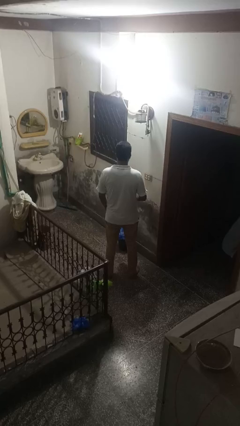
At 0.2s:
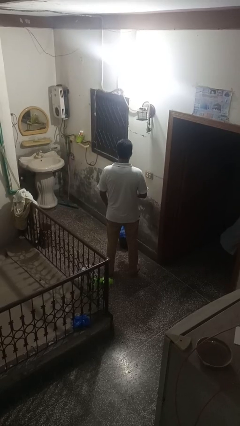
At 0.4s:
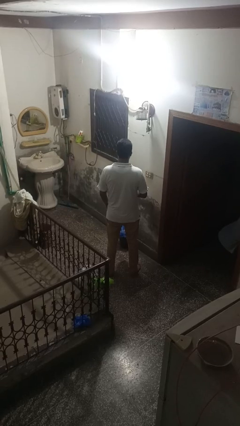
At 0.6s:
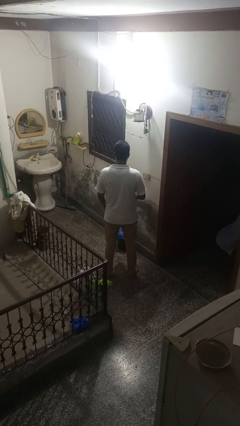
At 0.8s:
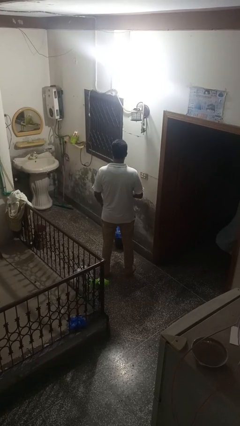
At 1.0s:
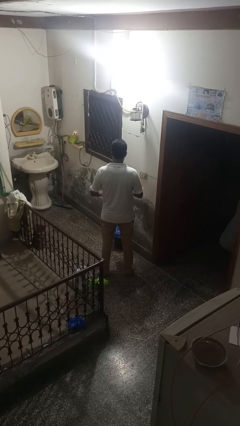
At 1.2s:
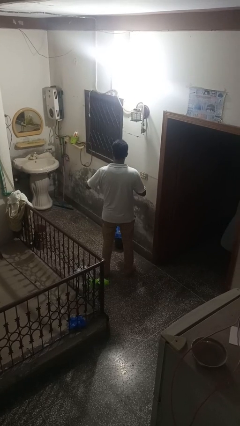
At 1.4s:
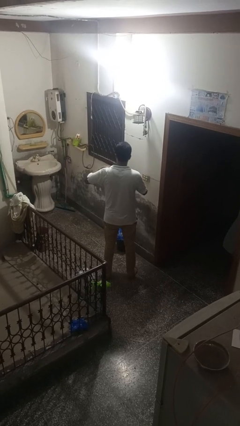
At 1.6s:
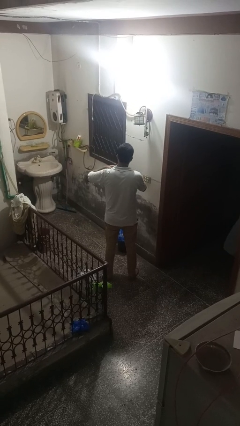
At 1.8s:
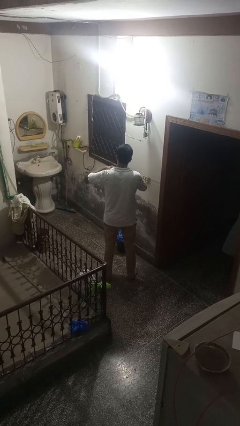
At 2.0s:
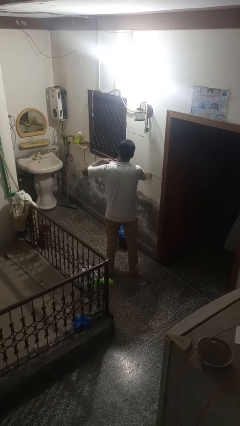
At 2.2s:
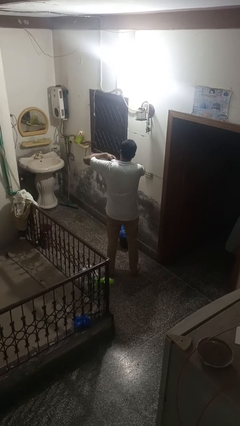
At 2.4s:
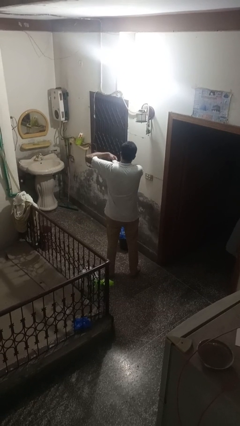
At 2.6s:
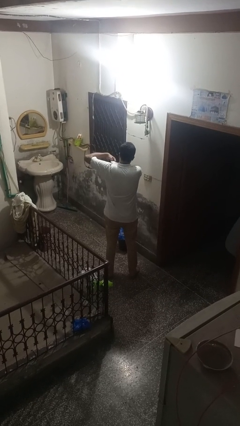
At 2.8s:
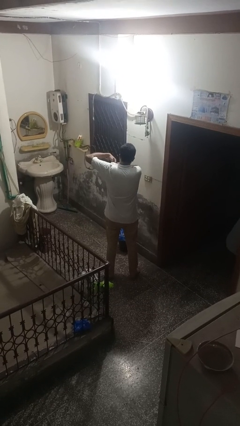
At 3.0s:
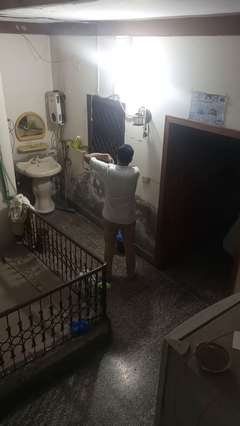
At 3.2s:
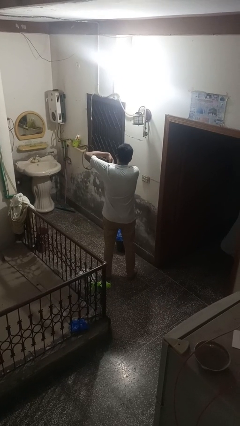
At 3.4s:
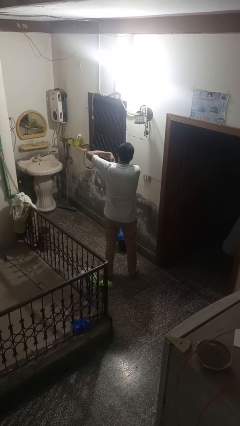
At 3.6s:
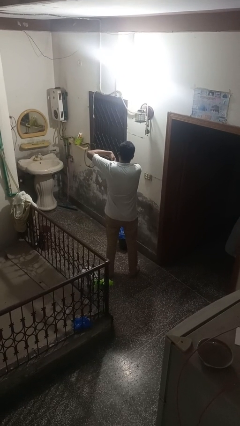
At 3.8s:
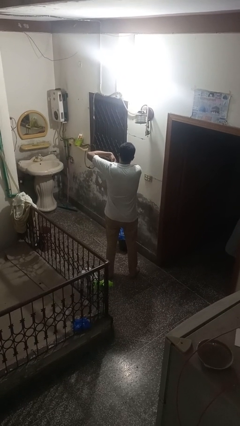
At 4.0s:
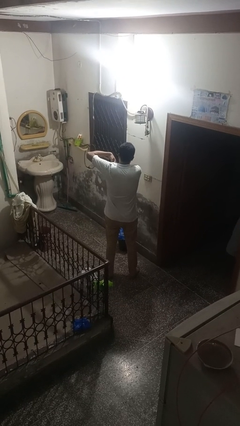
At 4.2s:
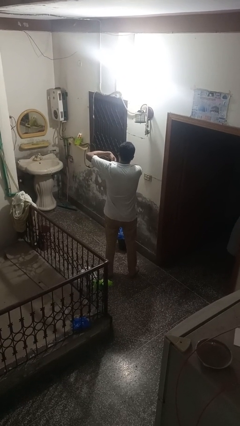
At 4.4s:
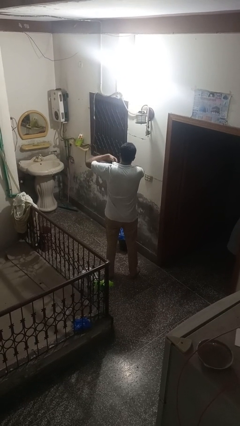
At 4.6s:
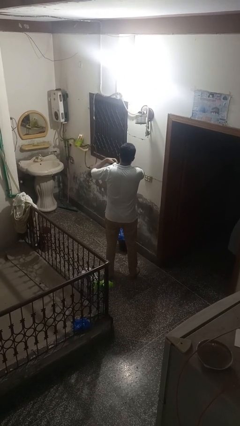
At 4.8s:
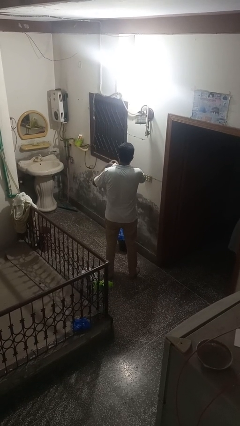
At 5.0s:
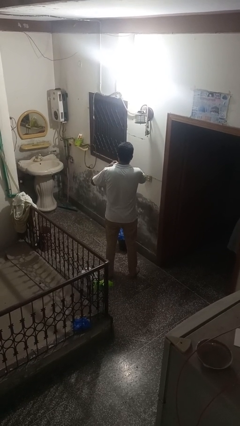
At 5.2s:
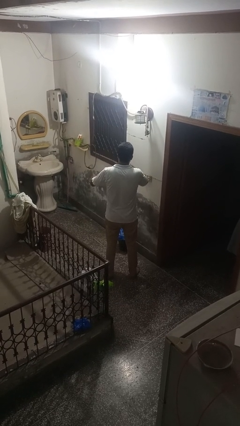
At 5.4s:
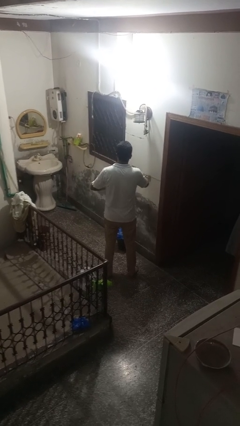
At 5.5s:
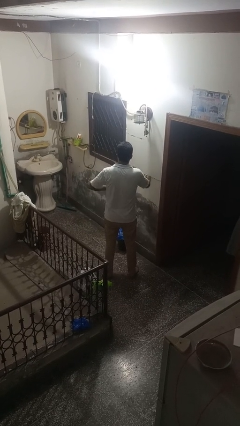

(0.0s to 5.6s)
person applies deodorant

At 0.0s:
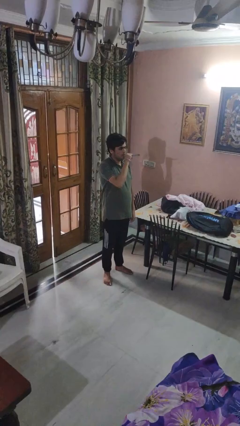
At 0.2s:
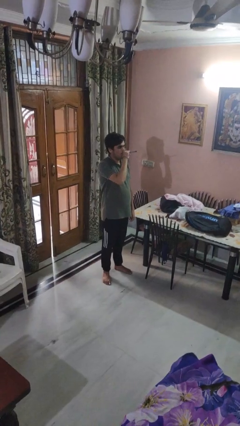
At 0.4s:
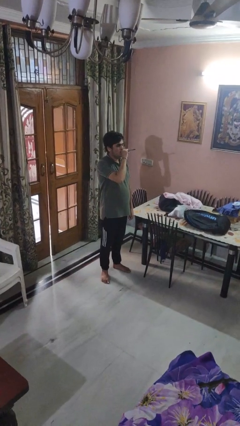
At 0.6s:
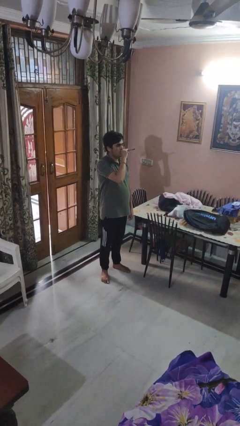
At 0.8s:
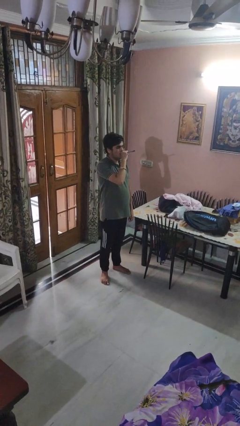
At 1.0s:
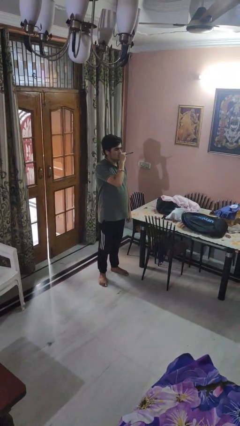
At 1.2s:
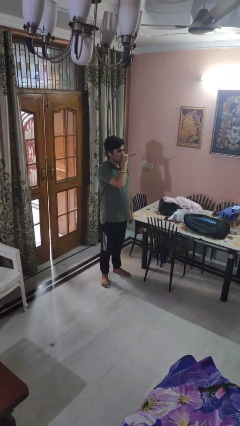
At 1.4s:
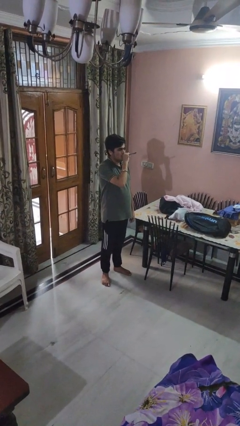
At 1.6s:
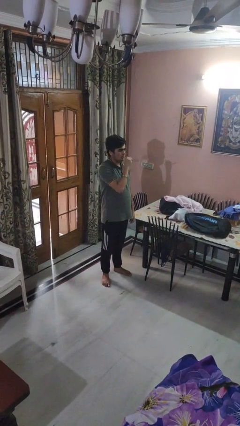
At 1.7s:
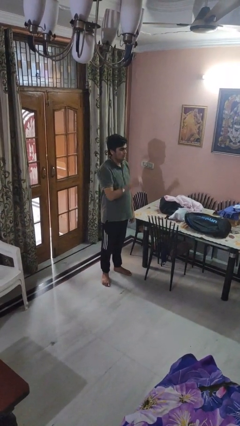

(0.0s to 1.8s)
person vapes

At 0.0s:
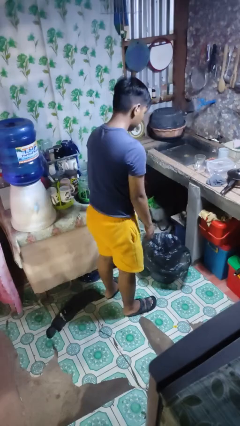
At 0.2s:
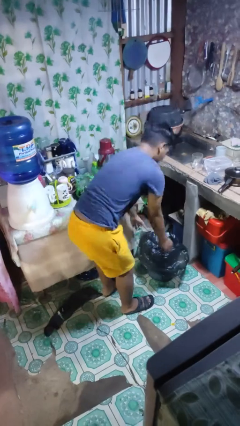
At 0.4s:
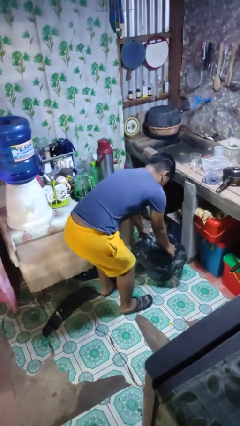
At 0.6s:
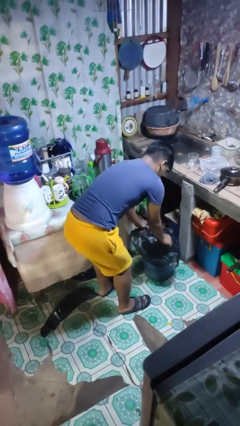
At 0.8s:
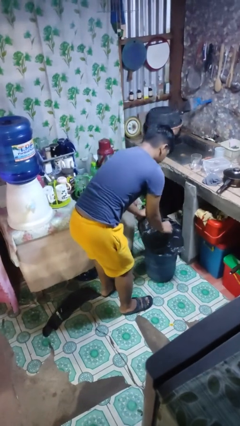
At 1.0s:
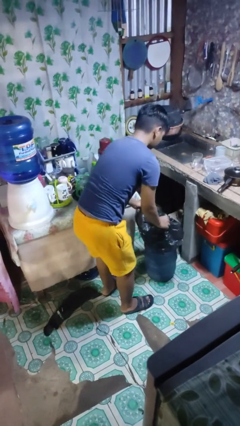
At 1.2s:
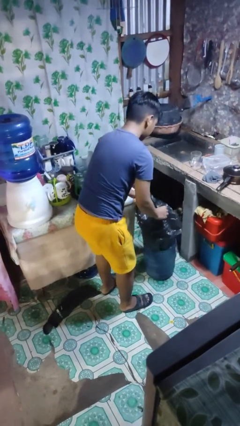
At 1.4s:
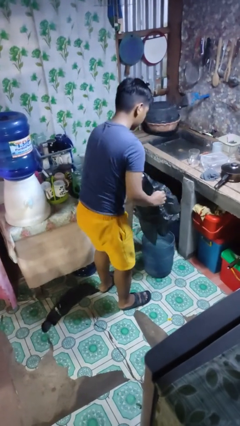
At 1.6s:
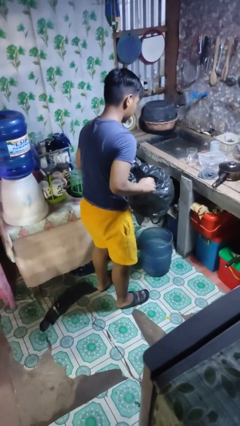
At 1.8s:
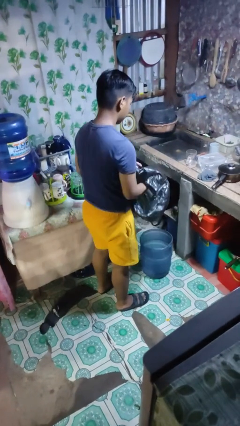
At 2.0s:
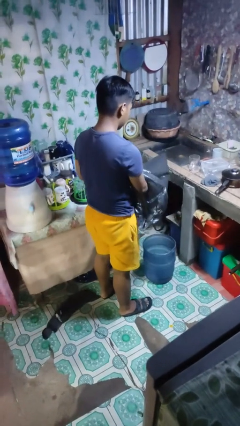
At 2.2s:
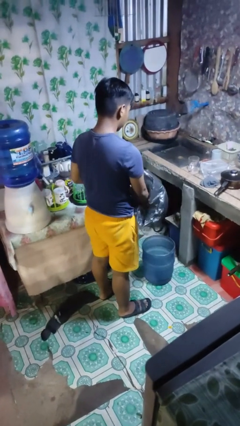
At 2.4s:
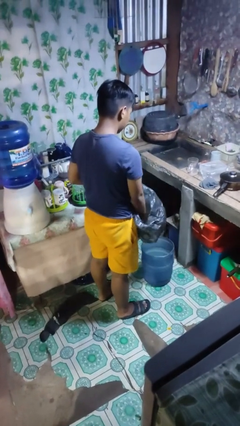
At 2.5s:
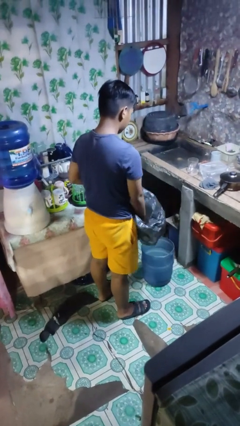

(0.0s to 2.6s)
person removes trashbag from trashcan

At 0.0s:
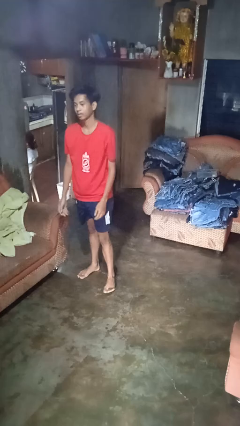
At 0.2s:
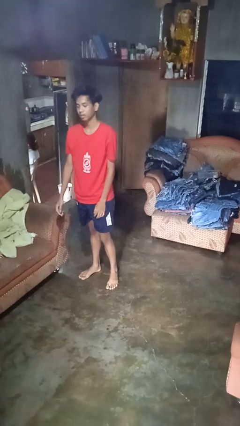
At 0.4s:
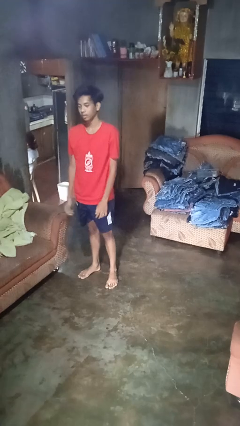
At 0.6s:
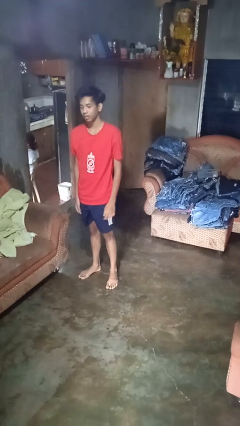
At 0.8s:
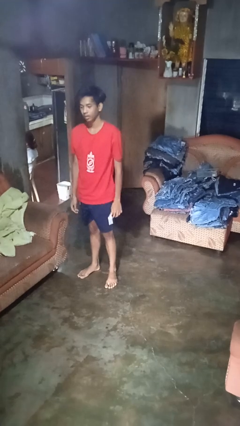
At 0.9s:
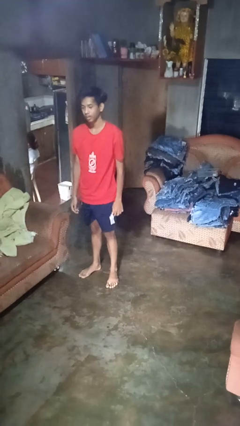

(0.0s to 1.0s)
person stands up from floor

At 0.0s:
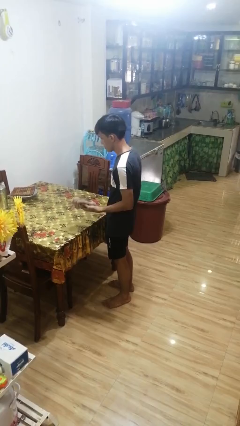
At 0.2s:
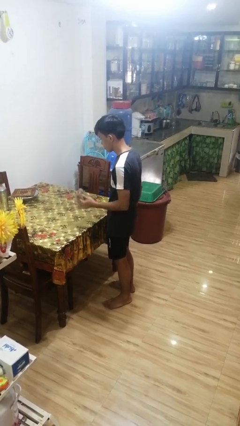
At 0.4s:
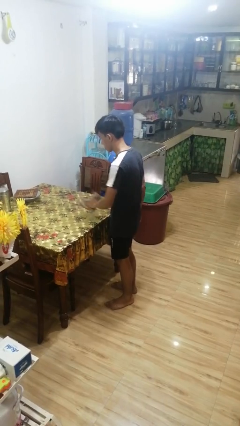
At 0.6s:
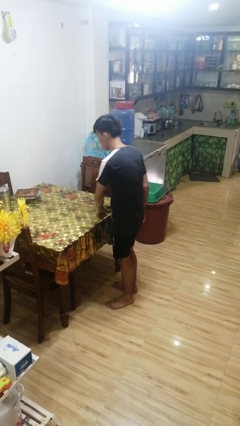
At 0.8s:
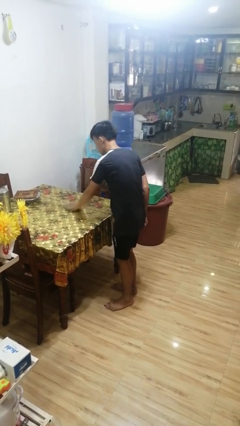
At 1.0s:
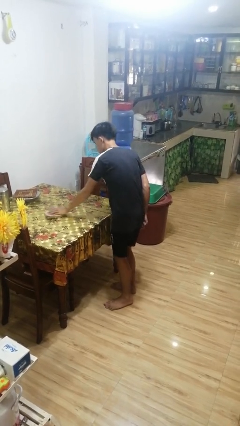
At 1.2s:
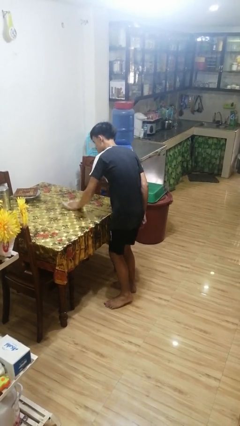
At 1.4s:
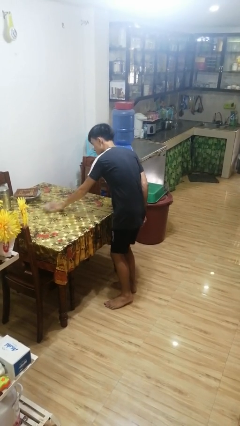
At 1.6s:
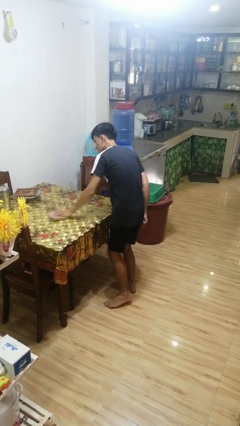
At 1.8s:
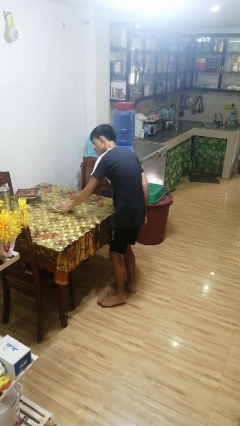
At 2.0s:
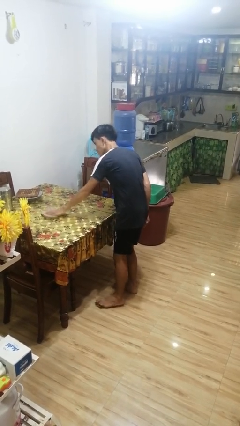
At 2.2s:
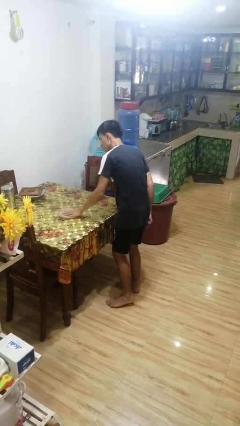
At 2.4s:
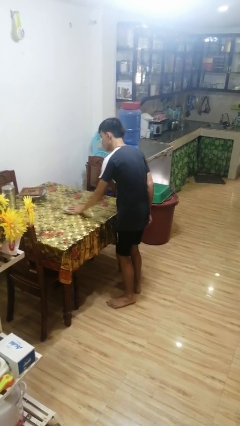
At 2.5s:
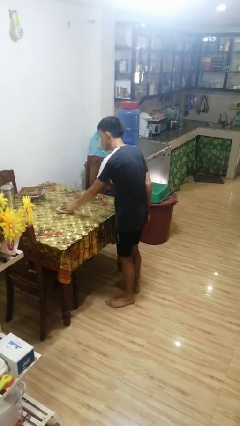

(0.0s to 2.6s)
person cleans table with rag

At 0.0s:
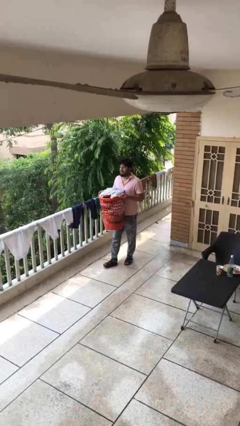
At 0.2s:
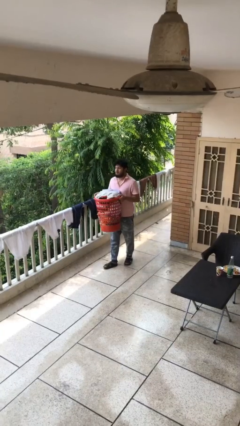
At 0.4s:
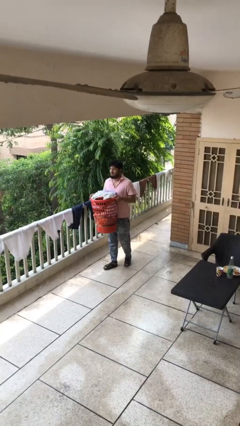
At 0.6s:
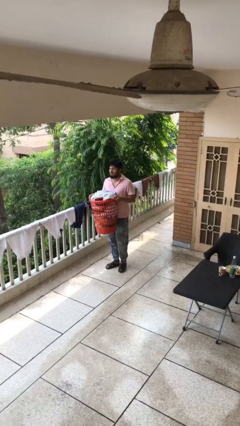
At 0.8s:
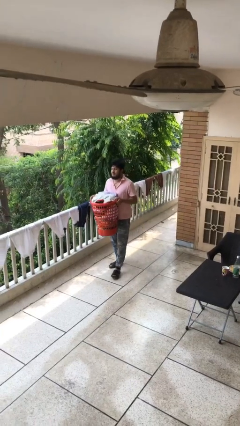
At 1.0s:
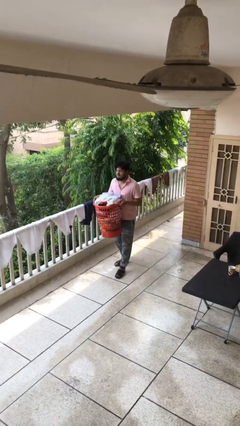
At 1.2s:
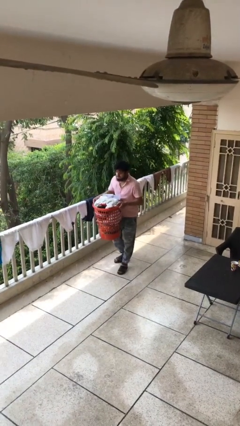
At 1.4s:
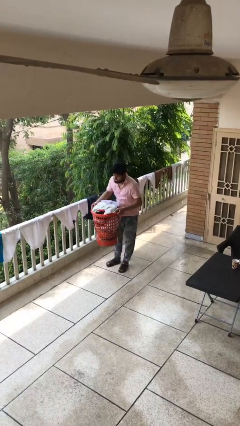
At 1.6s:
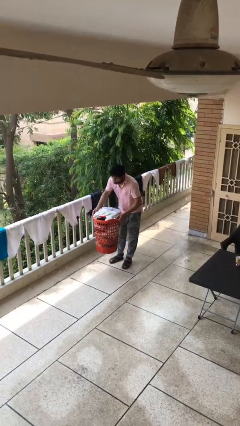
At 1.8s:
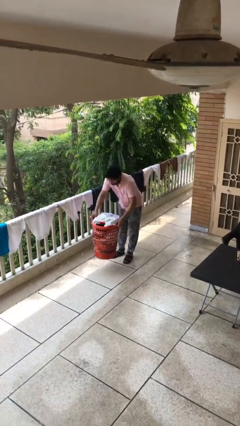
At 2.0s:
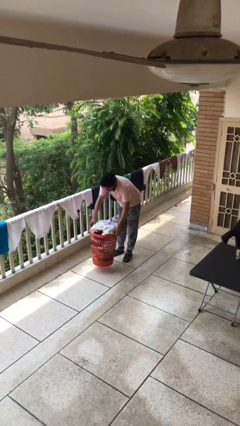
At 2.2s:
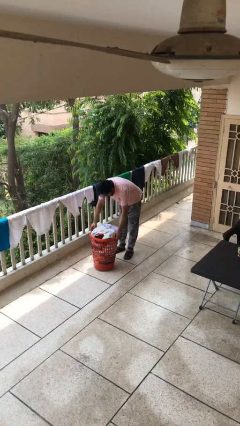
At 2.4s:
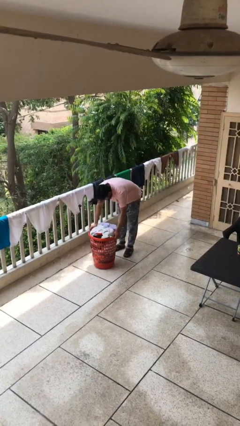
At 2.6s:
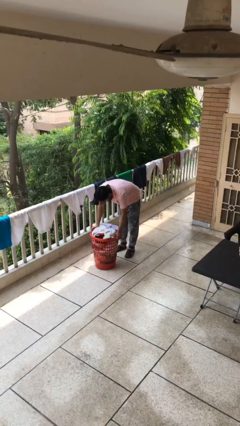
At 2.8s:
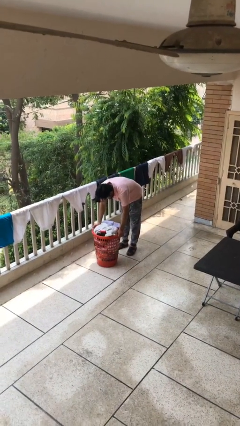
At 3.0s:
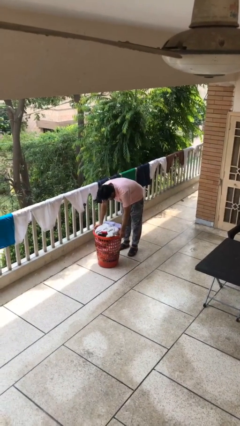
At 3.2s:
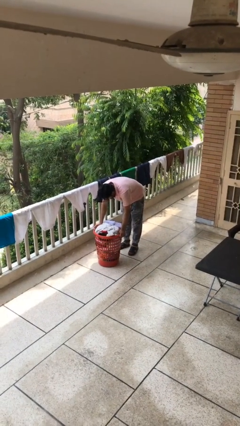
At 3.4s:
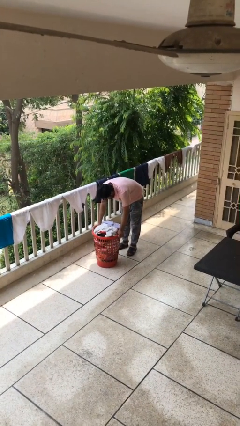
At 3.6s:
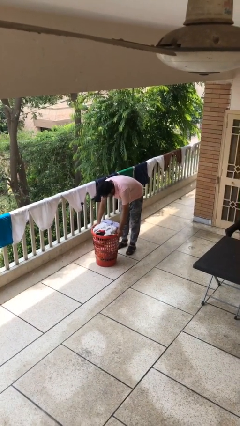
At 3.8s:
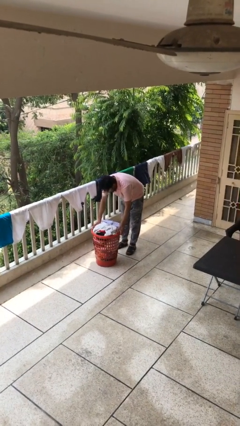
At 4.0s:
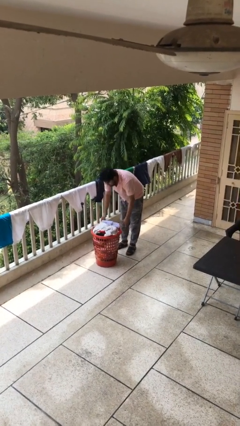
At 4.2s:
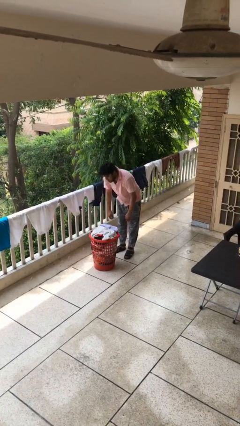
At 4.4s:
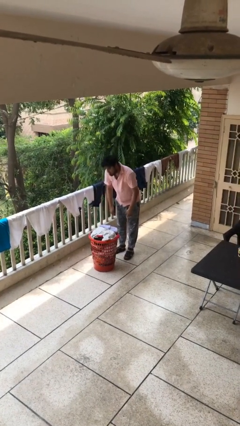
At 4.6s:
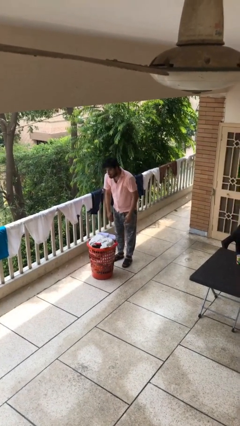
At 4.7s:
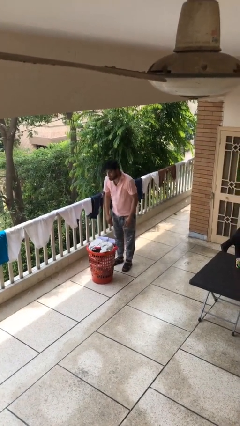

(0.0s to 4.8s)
person puts down object on floor
